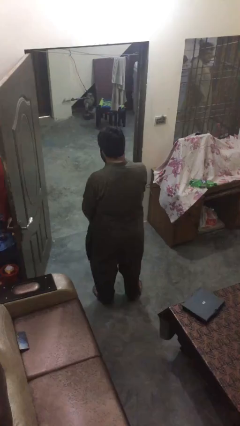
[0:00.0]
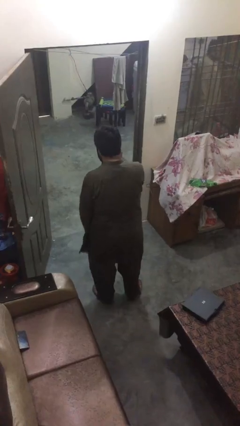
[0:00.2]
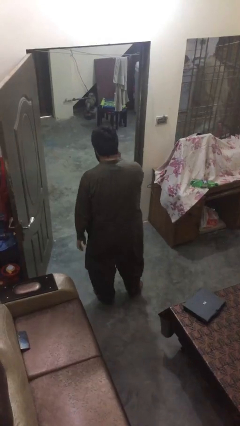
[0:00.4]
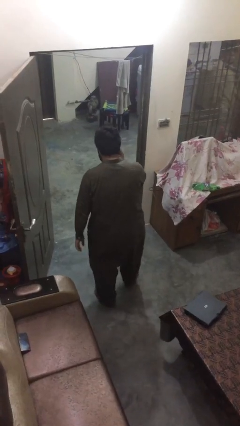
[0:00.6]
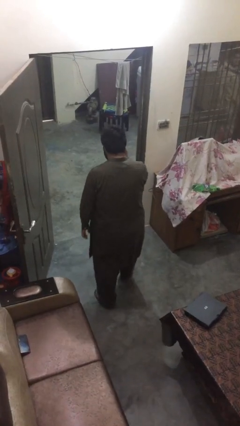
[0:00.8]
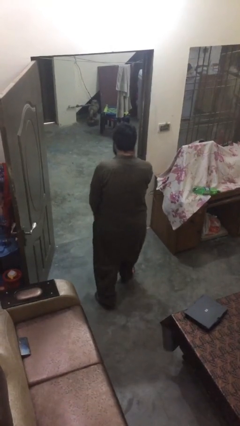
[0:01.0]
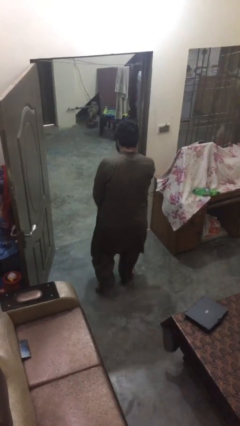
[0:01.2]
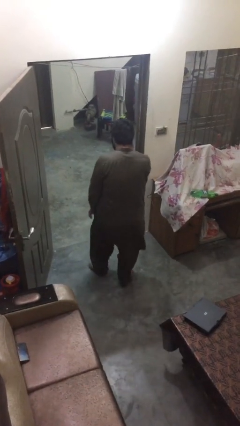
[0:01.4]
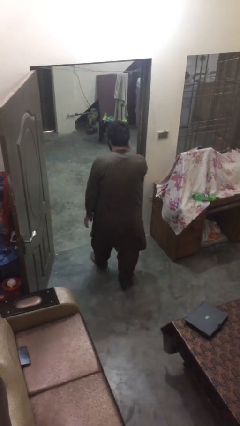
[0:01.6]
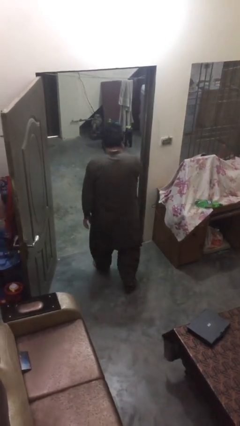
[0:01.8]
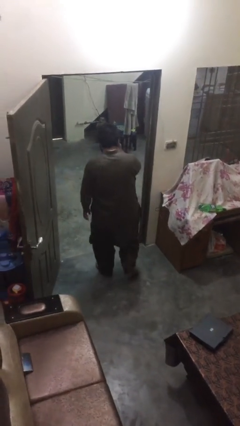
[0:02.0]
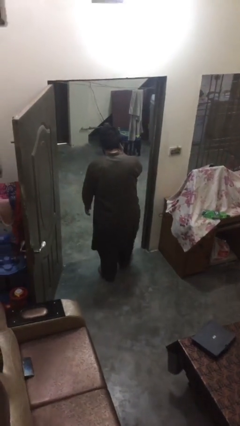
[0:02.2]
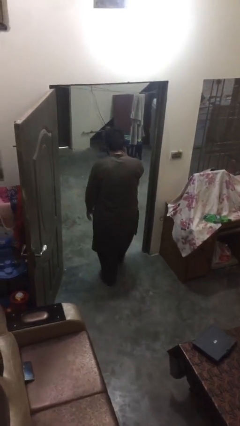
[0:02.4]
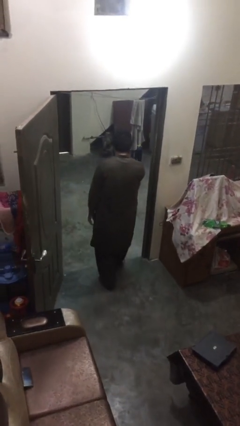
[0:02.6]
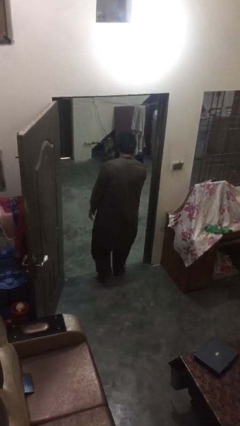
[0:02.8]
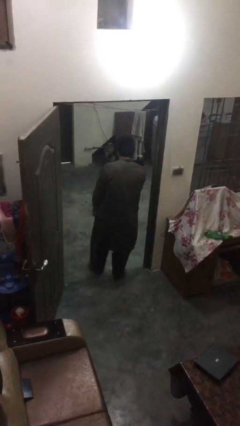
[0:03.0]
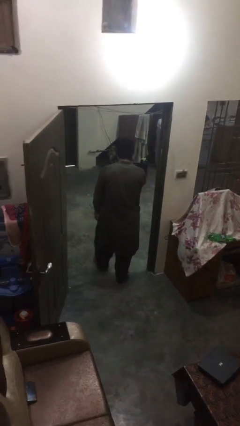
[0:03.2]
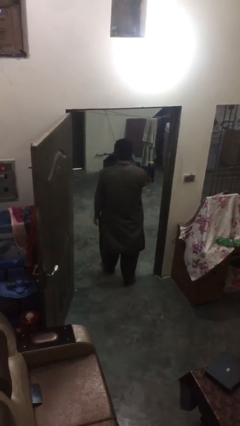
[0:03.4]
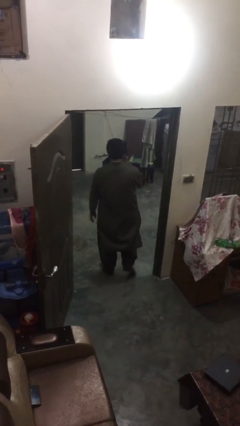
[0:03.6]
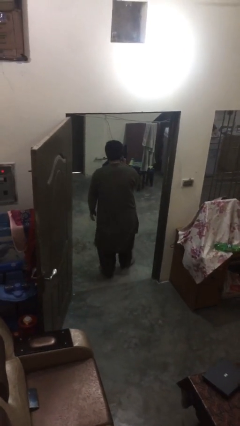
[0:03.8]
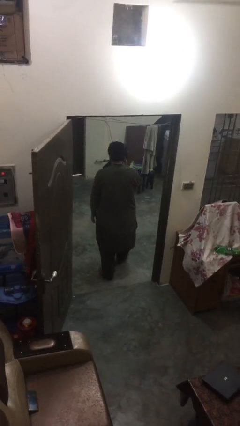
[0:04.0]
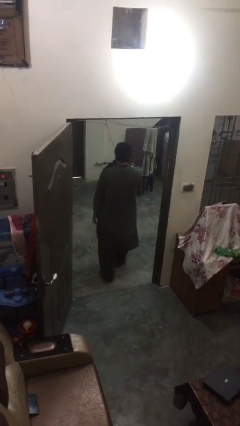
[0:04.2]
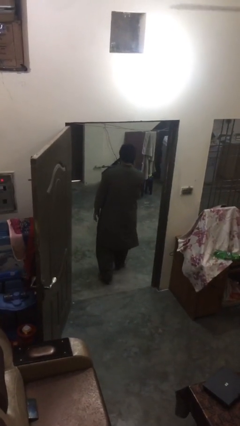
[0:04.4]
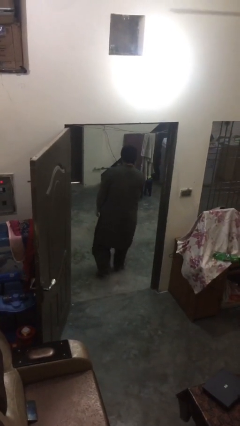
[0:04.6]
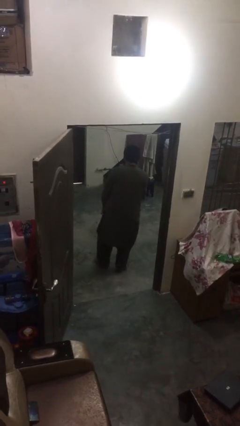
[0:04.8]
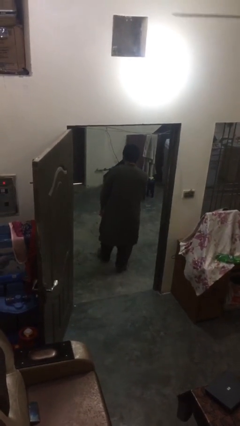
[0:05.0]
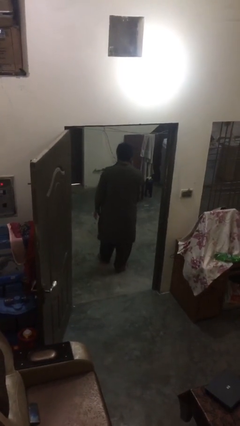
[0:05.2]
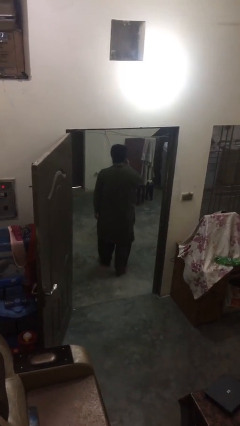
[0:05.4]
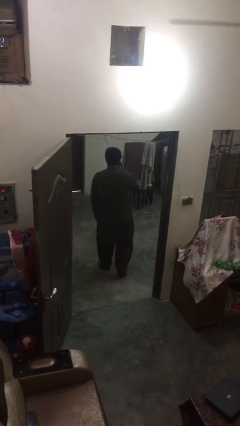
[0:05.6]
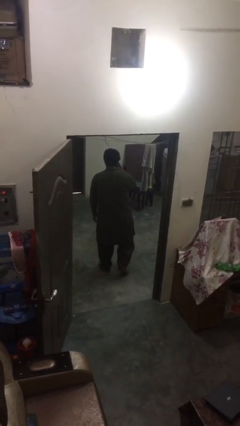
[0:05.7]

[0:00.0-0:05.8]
person exits scene through structure

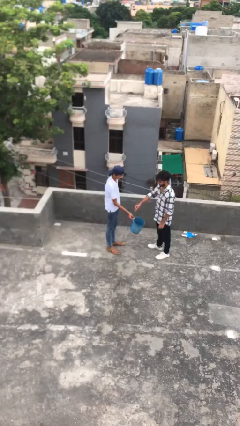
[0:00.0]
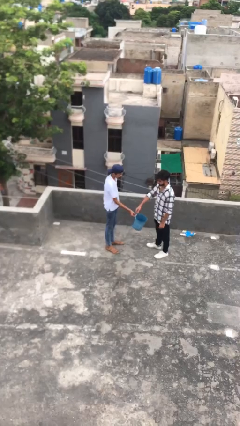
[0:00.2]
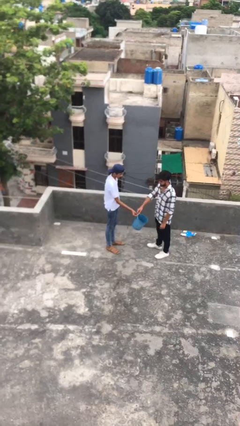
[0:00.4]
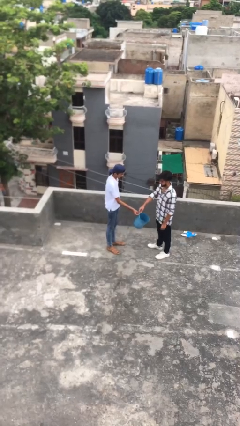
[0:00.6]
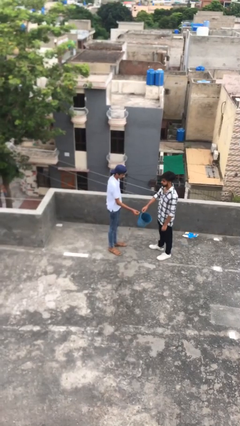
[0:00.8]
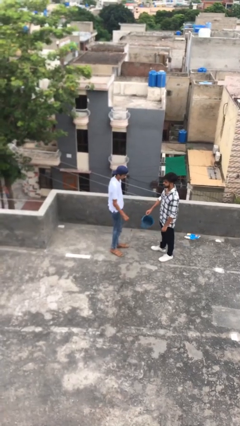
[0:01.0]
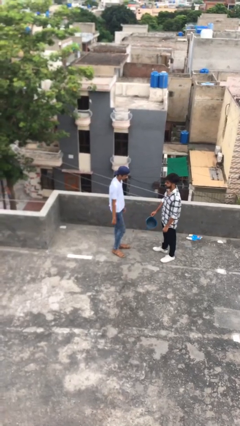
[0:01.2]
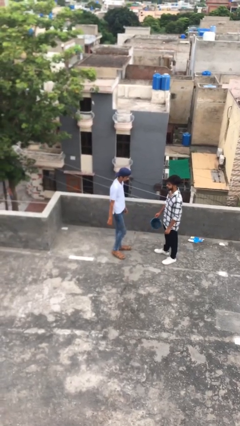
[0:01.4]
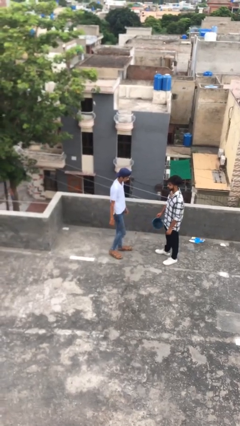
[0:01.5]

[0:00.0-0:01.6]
person transfers object to person

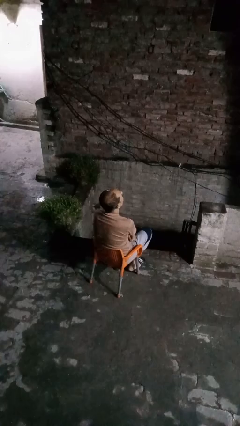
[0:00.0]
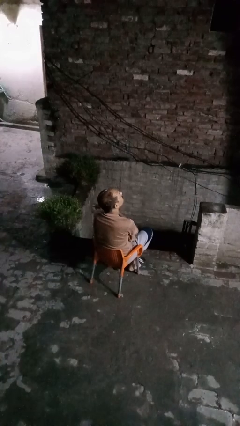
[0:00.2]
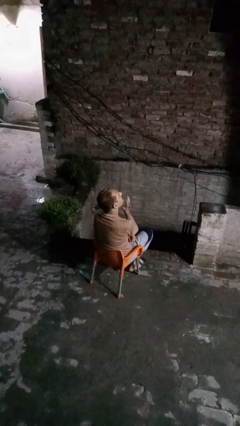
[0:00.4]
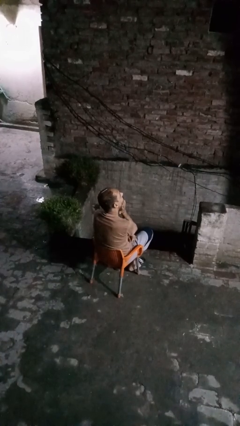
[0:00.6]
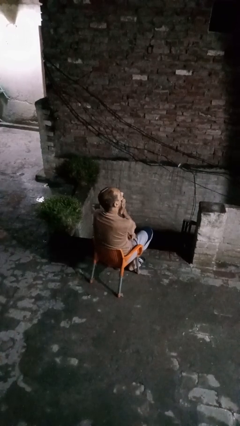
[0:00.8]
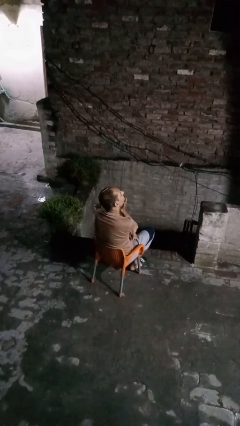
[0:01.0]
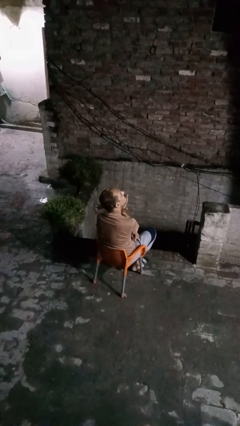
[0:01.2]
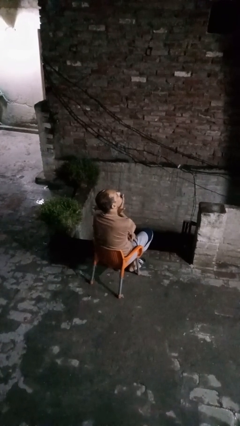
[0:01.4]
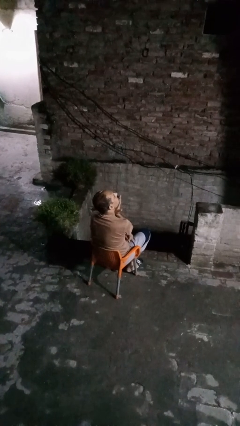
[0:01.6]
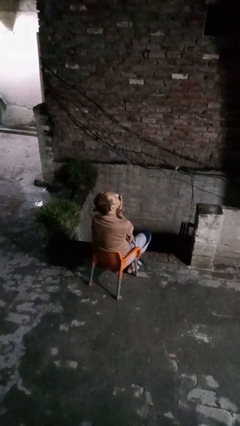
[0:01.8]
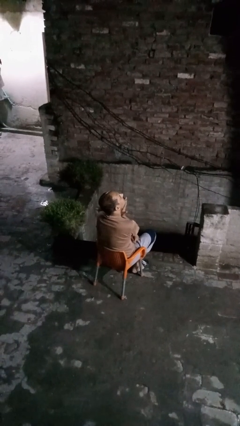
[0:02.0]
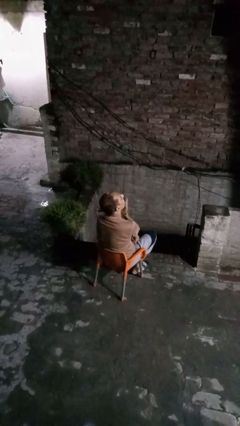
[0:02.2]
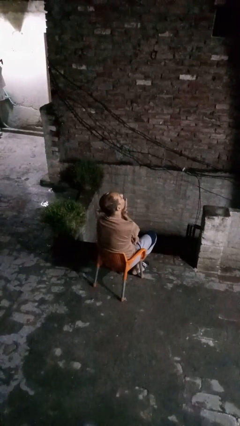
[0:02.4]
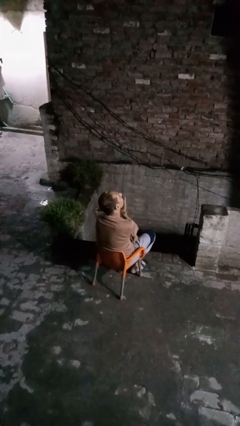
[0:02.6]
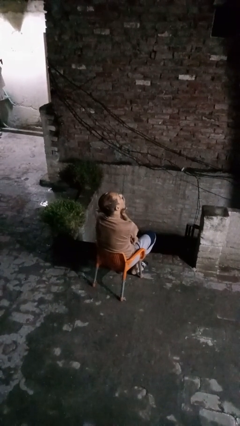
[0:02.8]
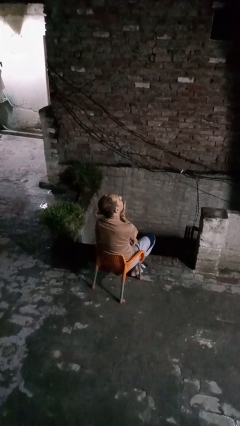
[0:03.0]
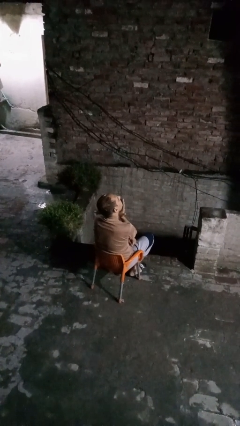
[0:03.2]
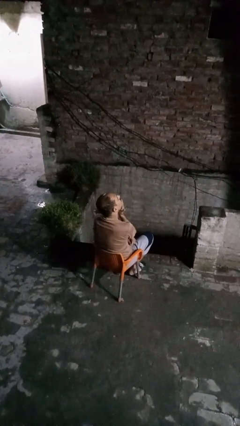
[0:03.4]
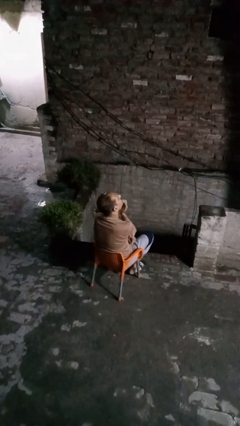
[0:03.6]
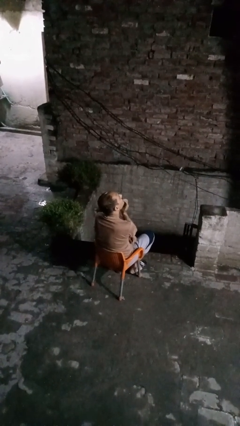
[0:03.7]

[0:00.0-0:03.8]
person strokes chin

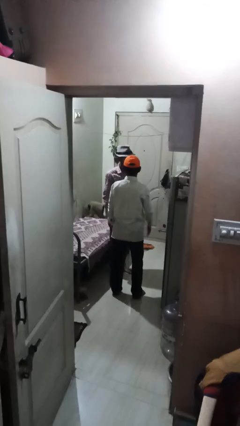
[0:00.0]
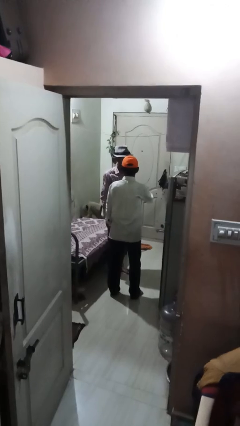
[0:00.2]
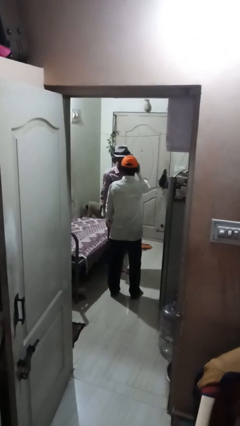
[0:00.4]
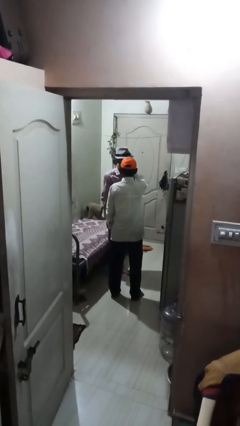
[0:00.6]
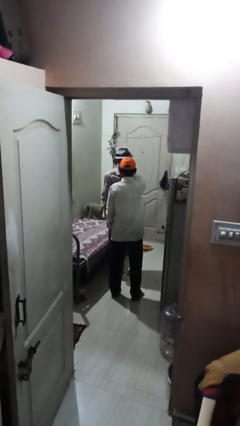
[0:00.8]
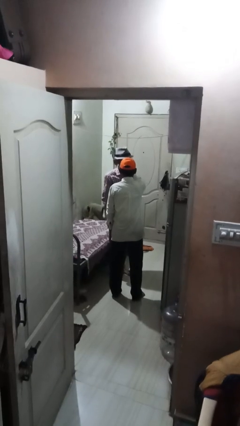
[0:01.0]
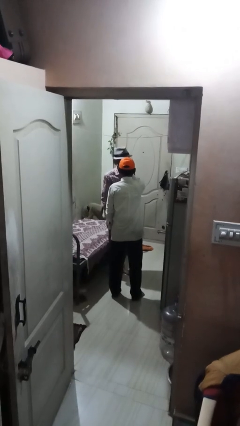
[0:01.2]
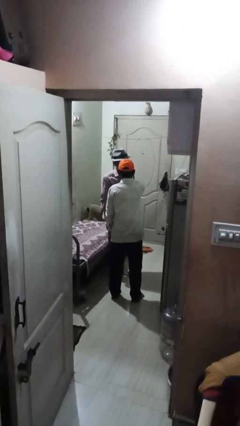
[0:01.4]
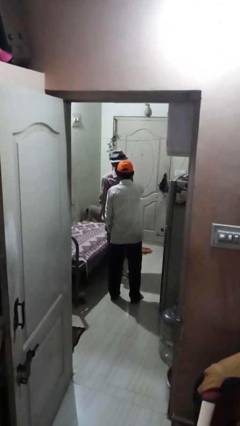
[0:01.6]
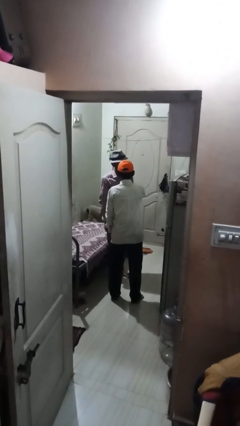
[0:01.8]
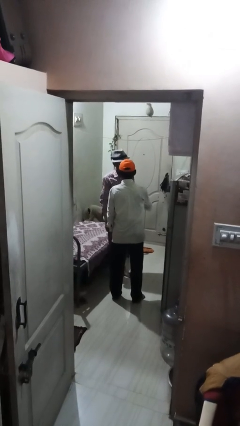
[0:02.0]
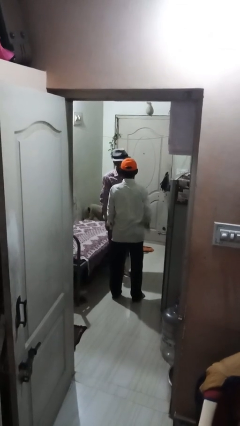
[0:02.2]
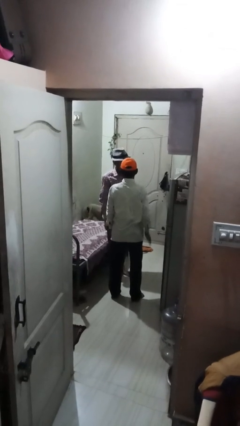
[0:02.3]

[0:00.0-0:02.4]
person touches face of person

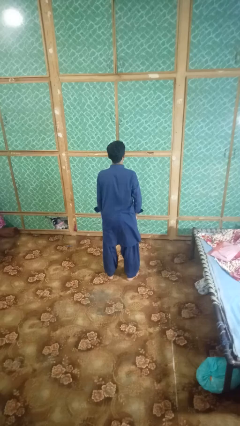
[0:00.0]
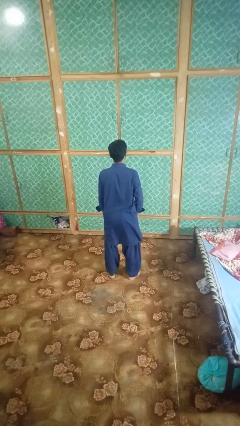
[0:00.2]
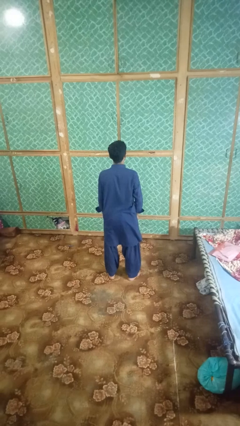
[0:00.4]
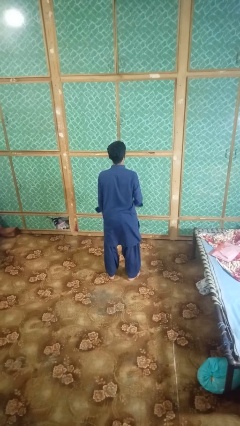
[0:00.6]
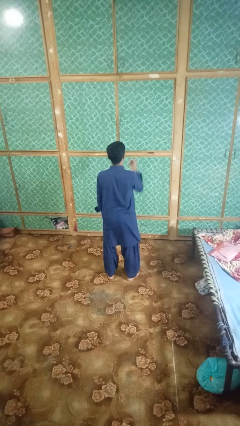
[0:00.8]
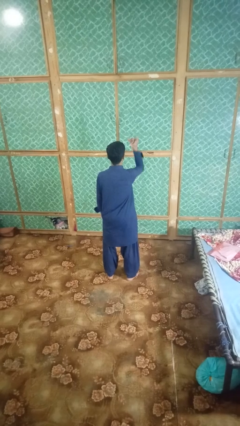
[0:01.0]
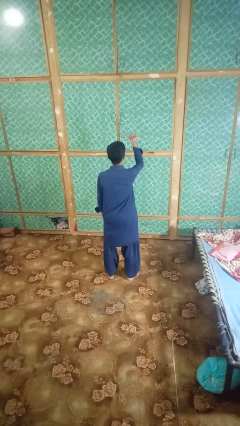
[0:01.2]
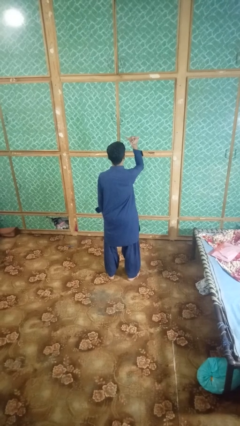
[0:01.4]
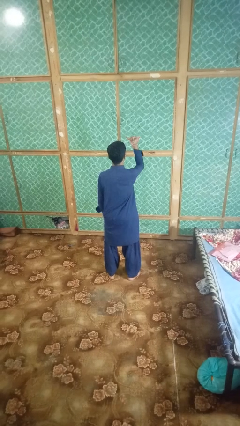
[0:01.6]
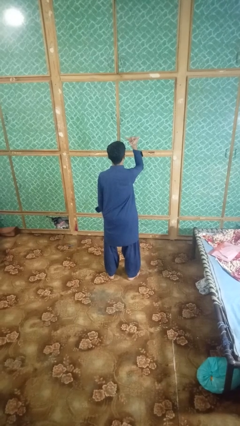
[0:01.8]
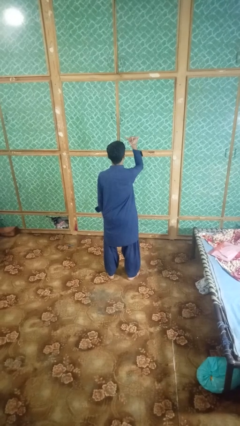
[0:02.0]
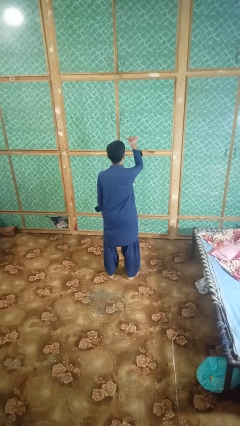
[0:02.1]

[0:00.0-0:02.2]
person gestures hang loose

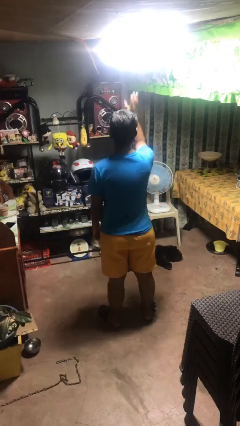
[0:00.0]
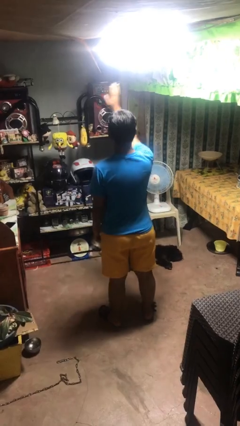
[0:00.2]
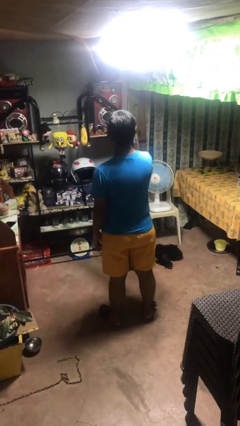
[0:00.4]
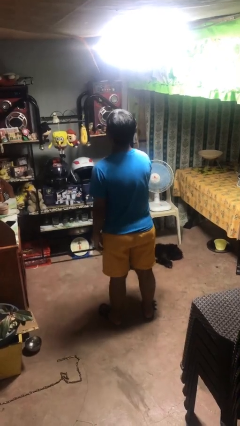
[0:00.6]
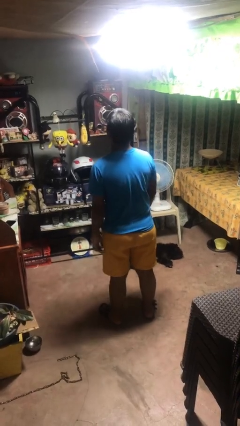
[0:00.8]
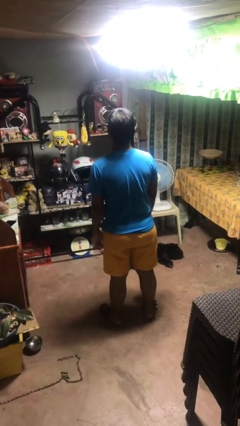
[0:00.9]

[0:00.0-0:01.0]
person gestures swipe down

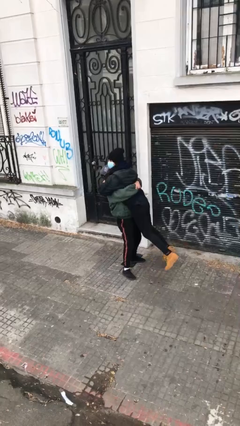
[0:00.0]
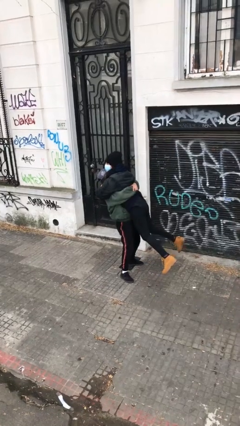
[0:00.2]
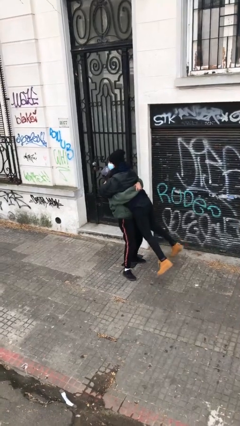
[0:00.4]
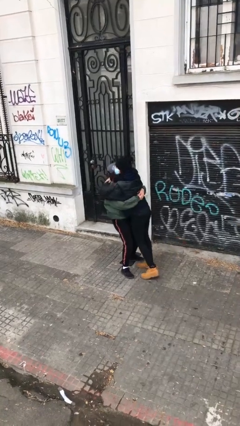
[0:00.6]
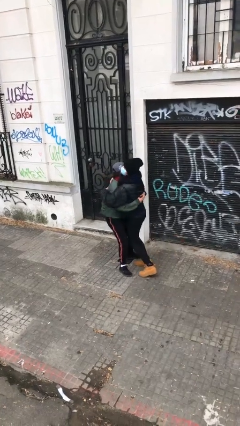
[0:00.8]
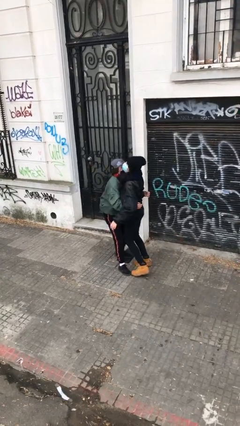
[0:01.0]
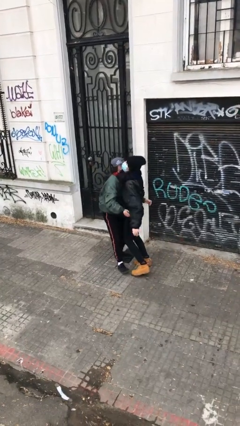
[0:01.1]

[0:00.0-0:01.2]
person puts down person
